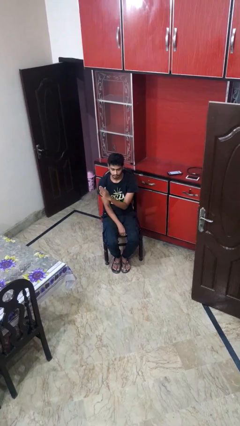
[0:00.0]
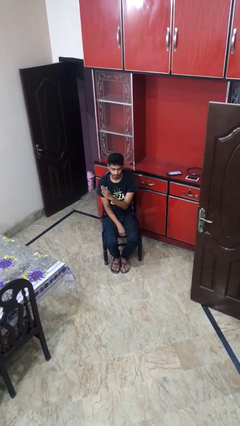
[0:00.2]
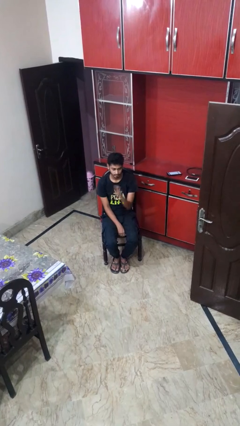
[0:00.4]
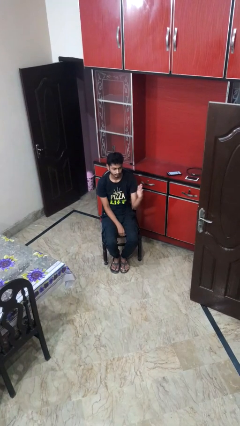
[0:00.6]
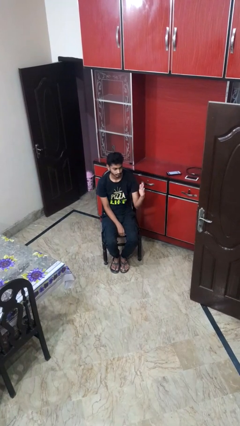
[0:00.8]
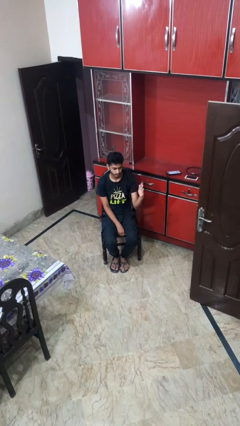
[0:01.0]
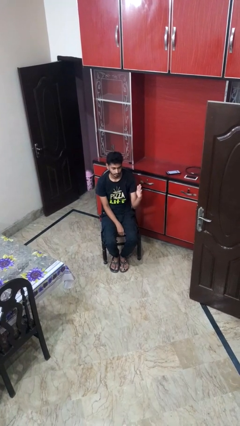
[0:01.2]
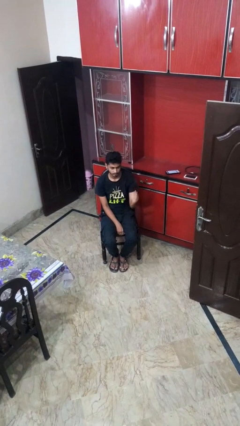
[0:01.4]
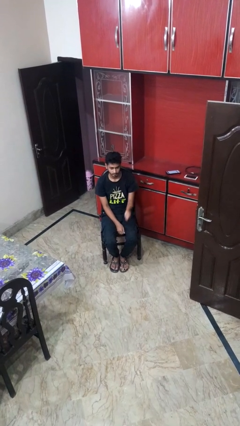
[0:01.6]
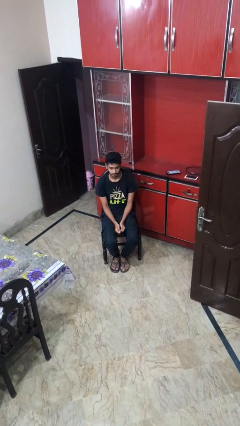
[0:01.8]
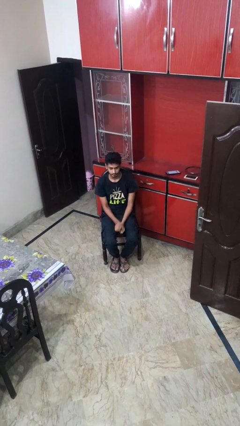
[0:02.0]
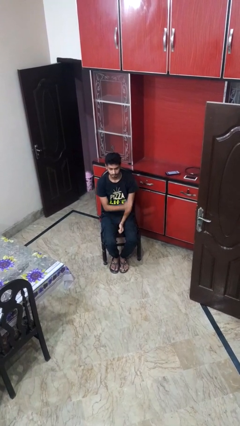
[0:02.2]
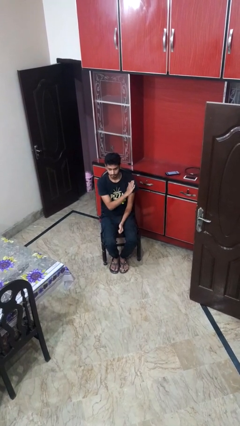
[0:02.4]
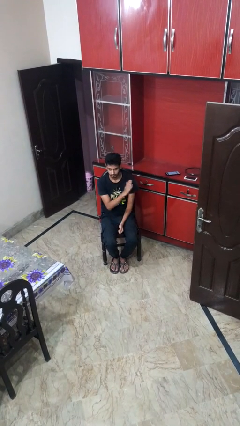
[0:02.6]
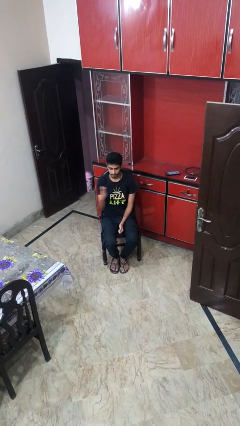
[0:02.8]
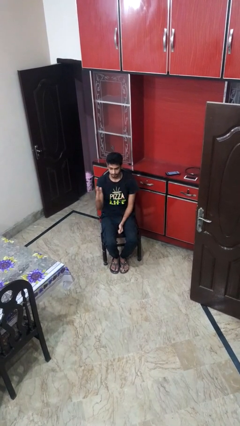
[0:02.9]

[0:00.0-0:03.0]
person gestures swipe left

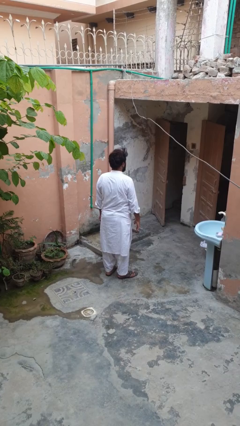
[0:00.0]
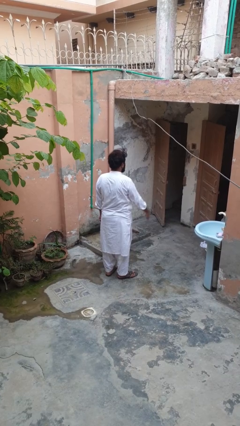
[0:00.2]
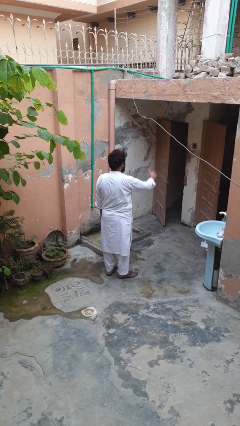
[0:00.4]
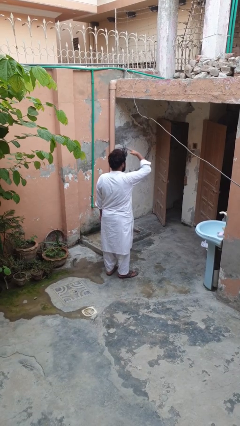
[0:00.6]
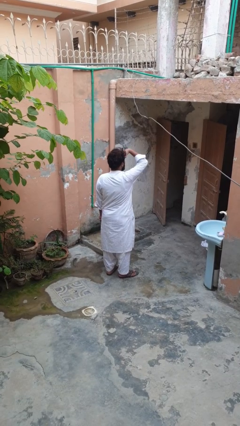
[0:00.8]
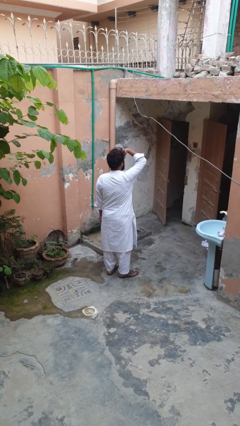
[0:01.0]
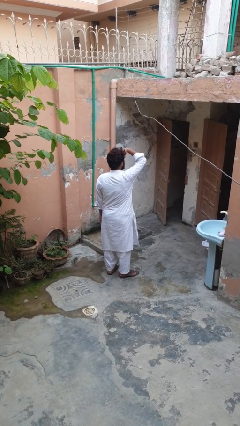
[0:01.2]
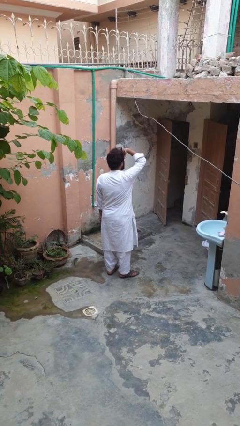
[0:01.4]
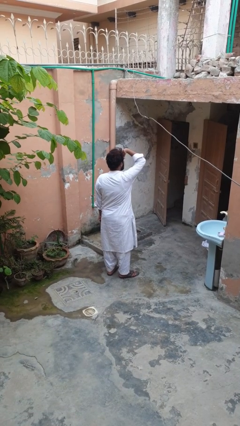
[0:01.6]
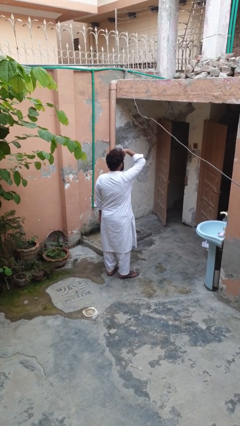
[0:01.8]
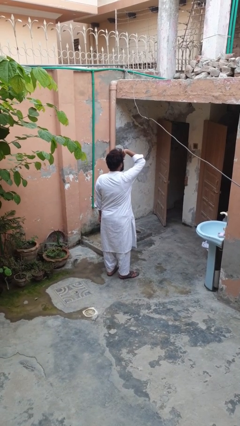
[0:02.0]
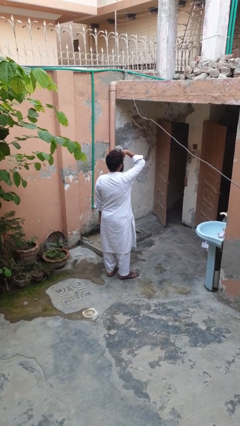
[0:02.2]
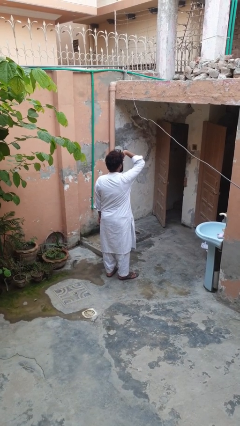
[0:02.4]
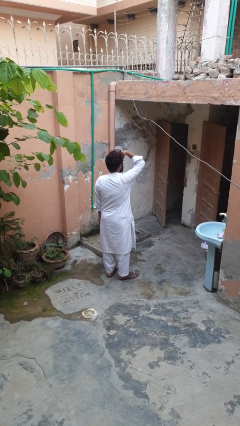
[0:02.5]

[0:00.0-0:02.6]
person shades eyes

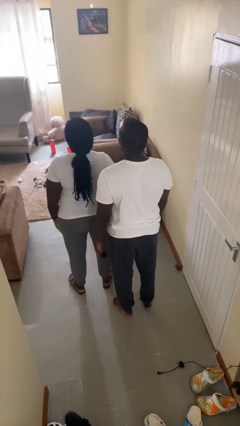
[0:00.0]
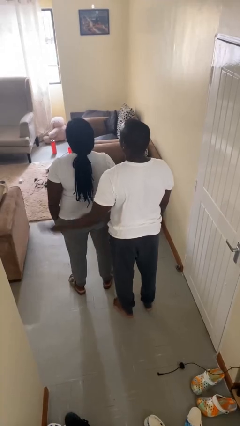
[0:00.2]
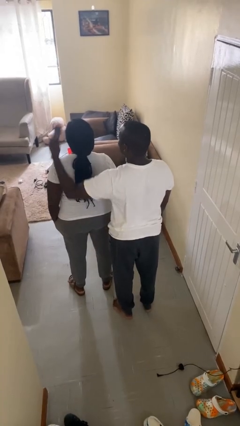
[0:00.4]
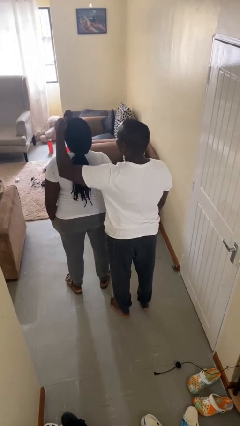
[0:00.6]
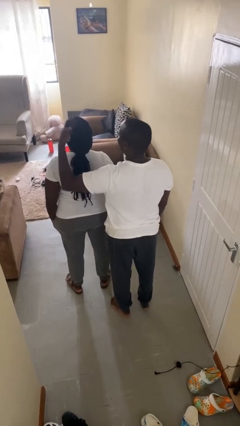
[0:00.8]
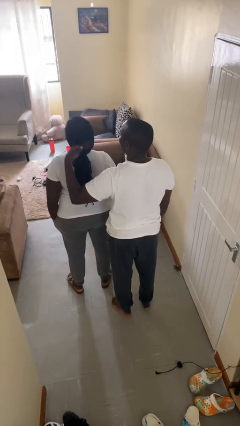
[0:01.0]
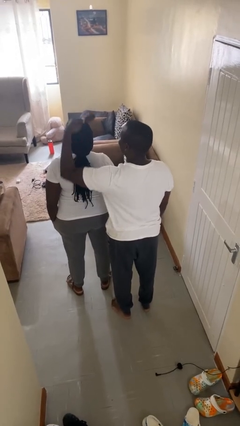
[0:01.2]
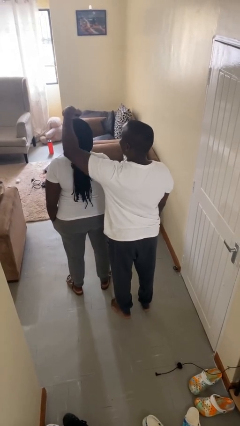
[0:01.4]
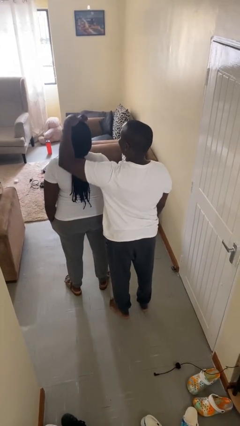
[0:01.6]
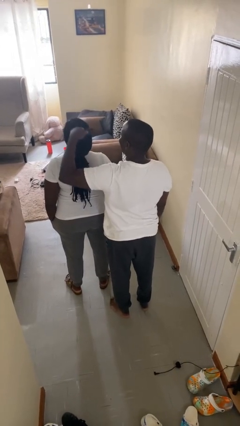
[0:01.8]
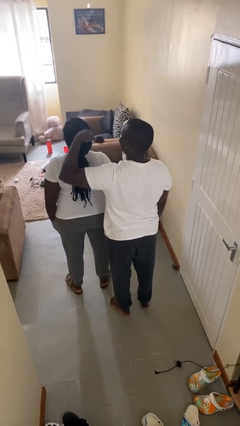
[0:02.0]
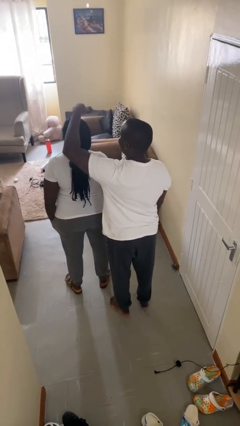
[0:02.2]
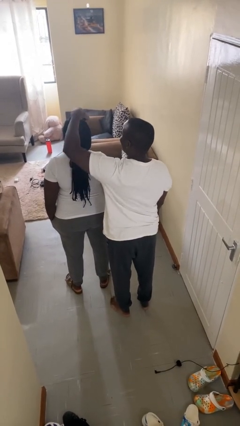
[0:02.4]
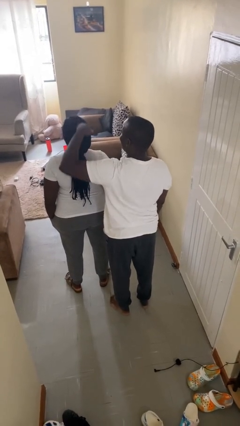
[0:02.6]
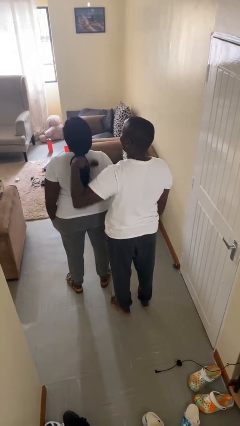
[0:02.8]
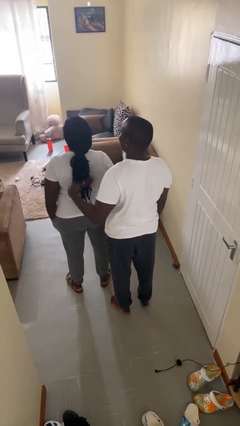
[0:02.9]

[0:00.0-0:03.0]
person brushes hair of person

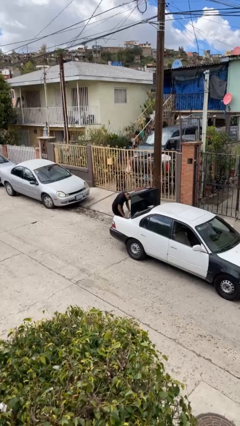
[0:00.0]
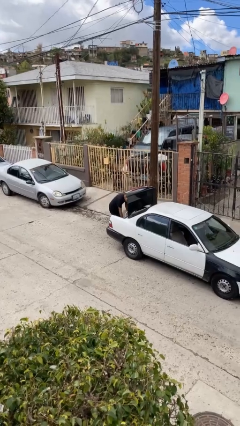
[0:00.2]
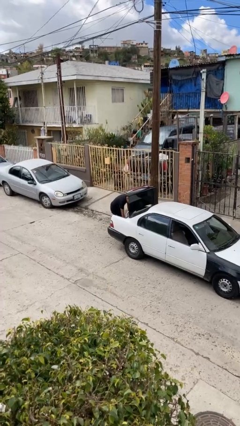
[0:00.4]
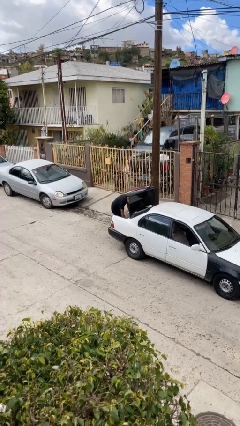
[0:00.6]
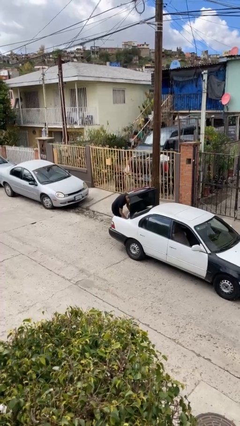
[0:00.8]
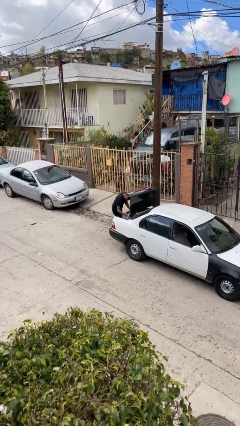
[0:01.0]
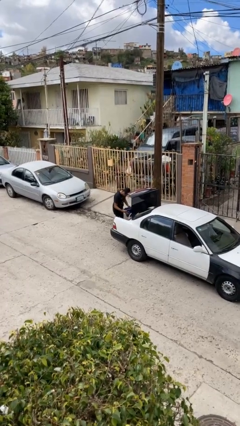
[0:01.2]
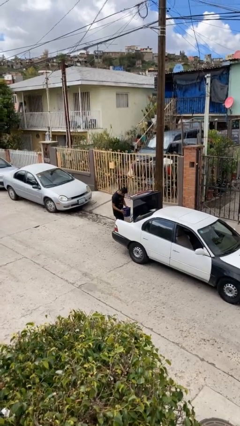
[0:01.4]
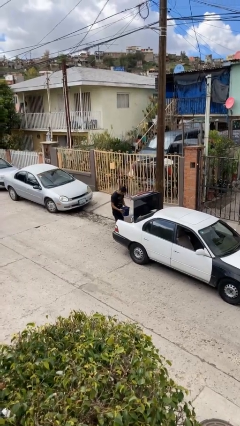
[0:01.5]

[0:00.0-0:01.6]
person unloads car

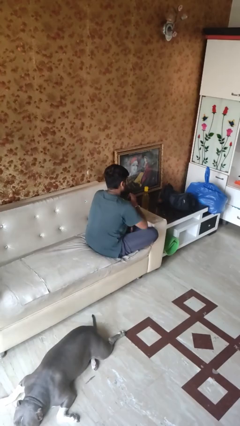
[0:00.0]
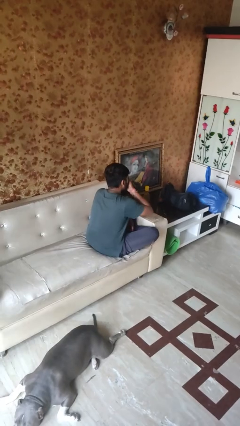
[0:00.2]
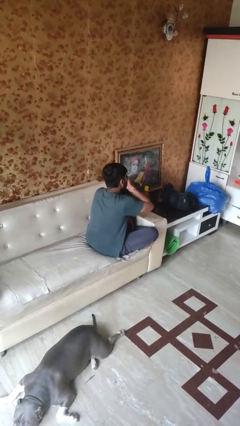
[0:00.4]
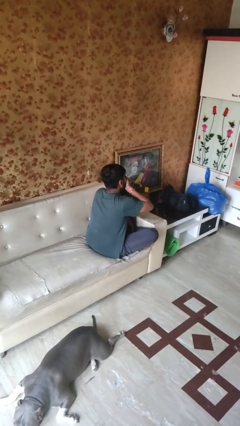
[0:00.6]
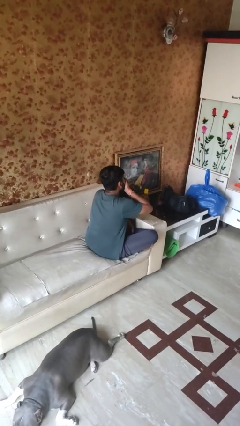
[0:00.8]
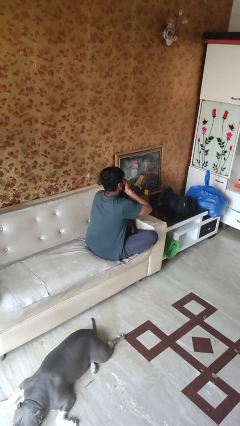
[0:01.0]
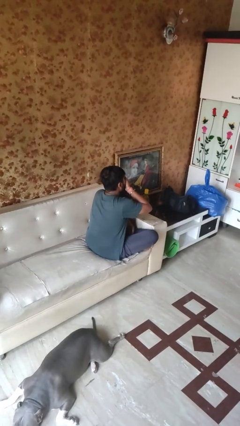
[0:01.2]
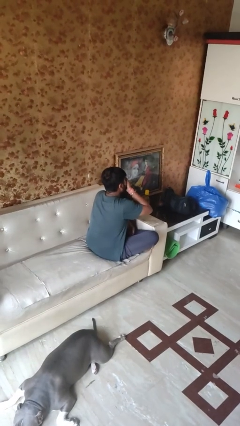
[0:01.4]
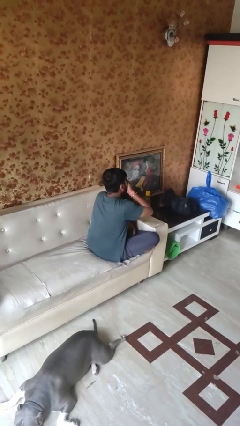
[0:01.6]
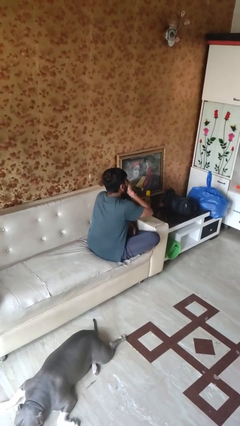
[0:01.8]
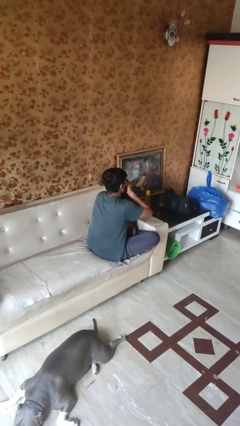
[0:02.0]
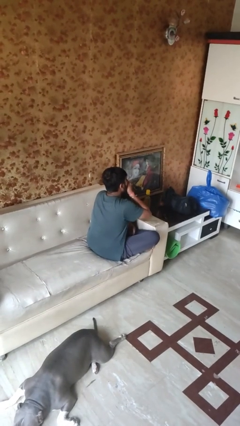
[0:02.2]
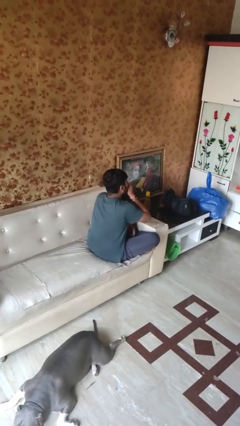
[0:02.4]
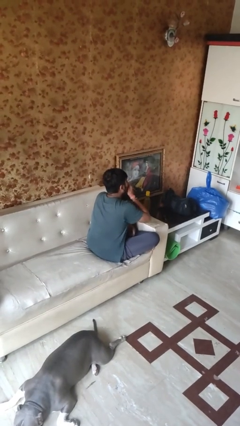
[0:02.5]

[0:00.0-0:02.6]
person yawns

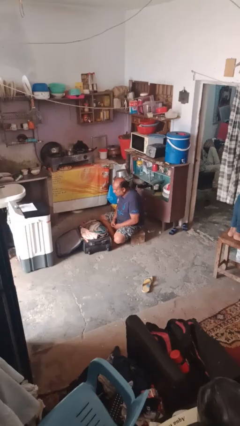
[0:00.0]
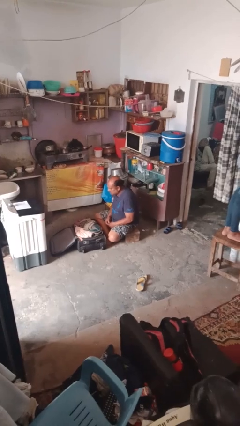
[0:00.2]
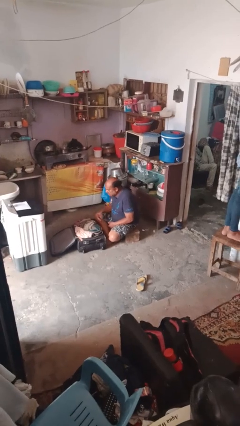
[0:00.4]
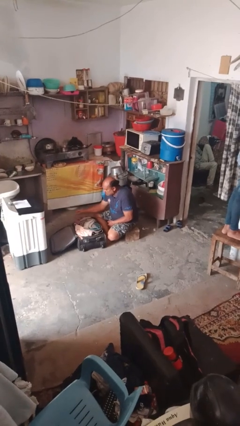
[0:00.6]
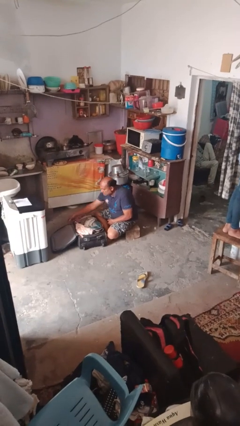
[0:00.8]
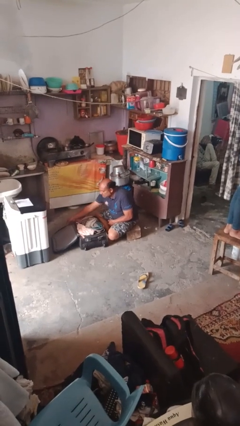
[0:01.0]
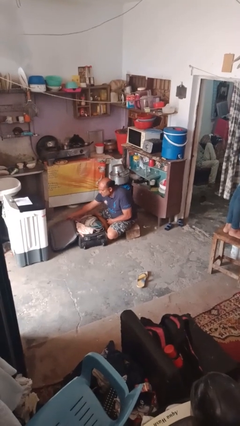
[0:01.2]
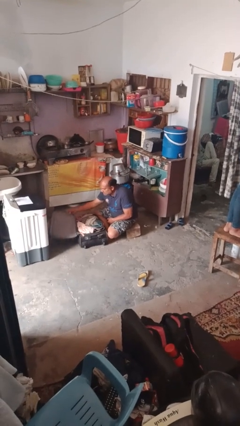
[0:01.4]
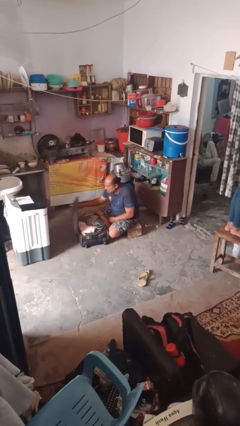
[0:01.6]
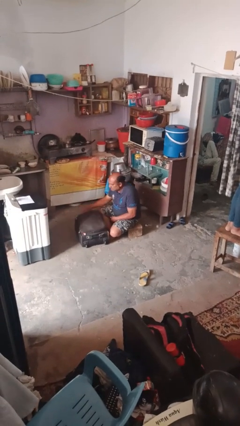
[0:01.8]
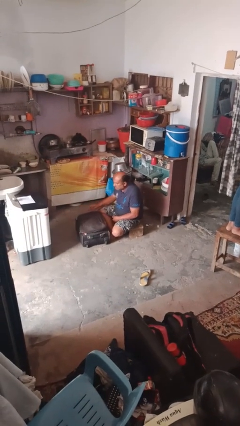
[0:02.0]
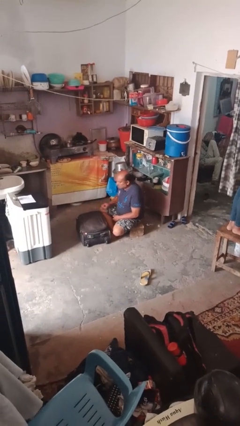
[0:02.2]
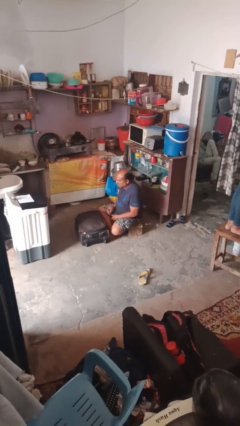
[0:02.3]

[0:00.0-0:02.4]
person closes suitcase

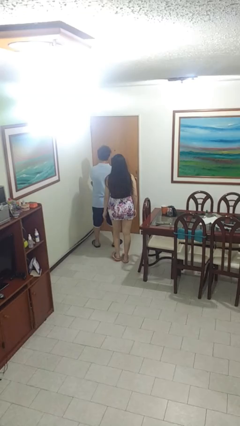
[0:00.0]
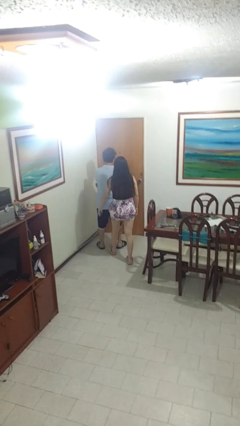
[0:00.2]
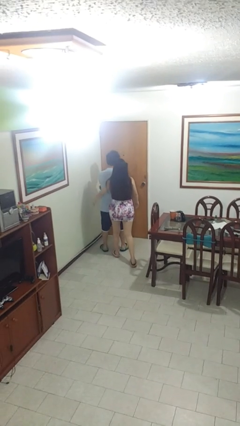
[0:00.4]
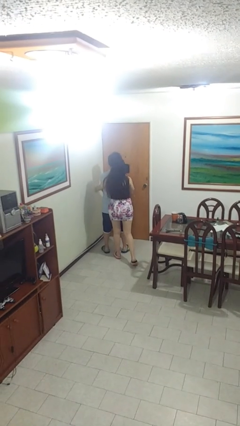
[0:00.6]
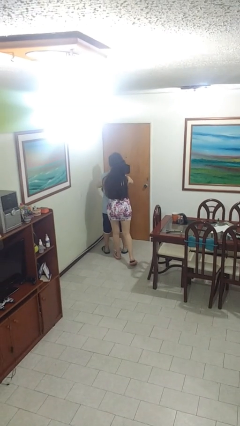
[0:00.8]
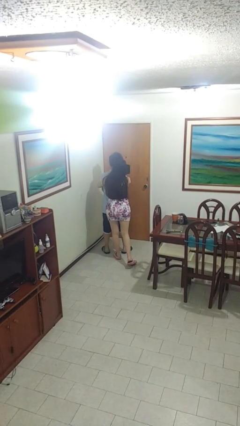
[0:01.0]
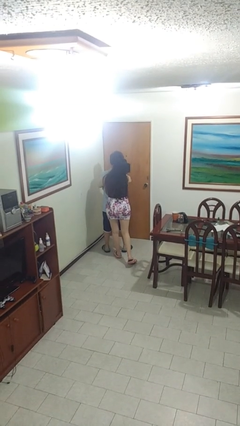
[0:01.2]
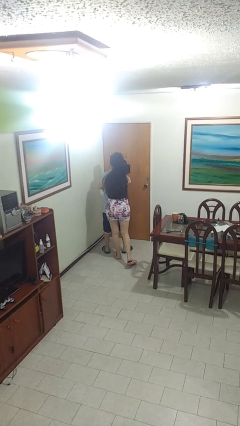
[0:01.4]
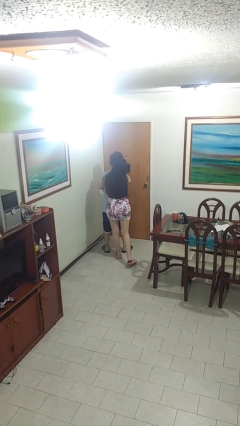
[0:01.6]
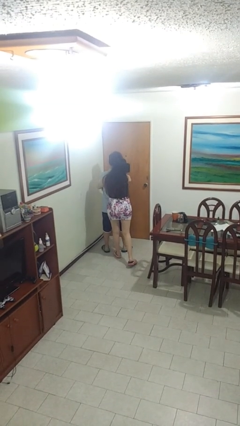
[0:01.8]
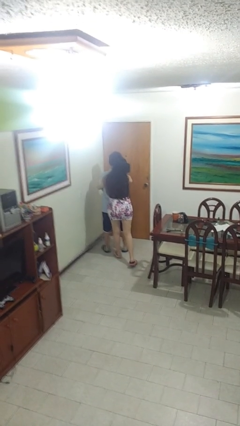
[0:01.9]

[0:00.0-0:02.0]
person hugs person from behind
